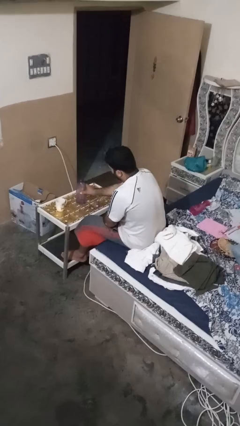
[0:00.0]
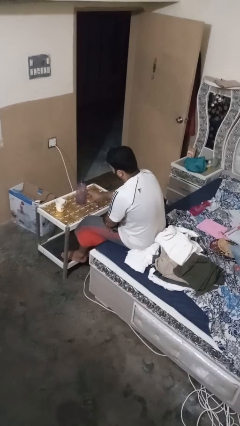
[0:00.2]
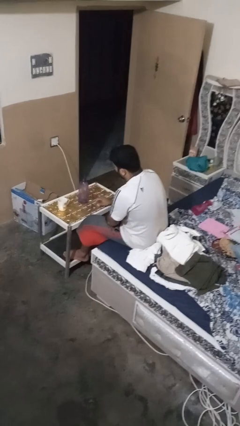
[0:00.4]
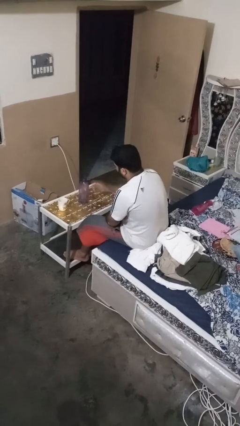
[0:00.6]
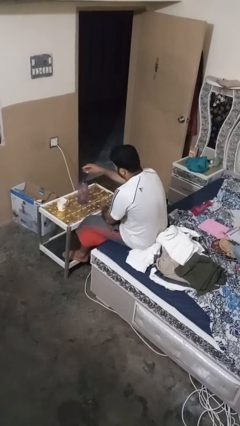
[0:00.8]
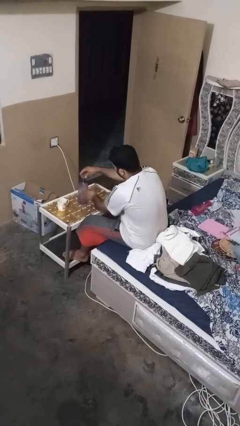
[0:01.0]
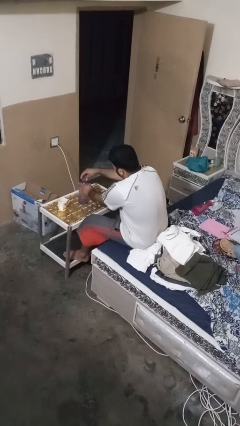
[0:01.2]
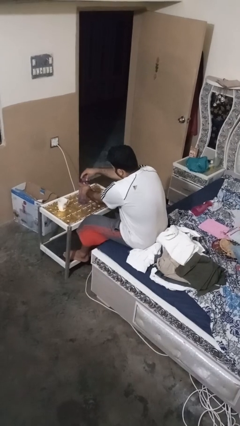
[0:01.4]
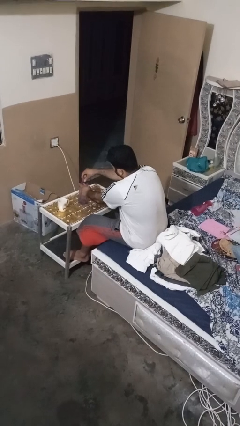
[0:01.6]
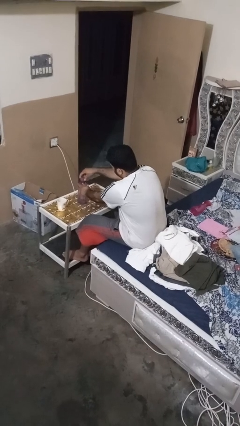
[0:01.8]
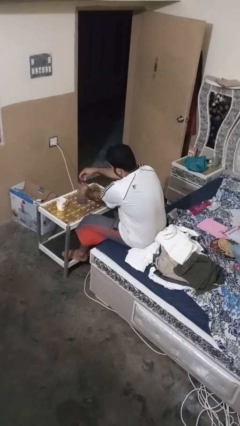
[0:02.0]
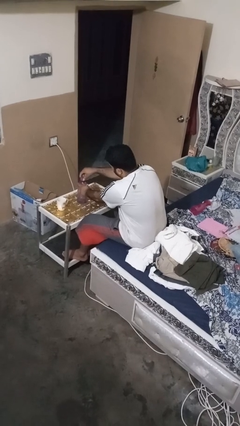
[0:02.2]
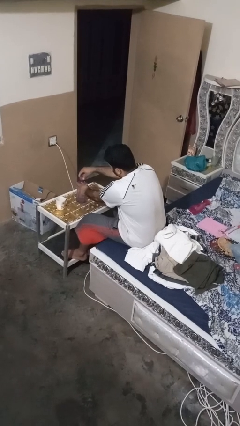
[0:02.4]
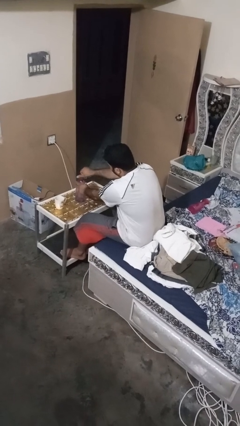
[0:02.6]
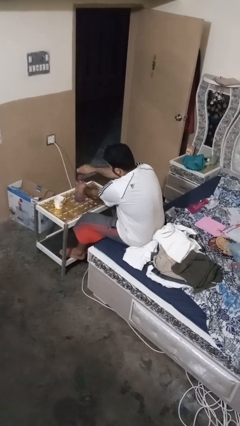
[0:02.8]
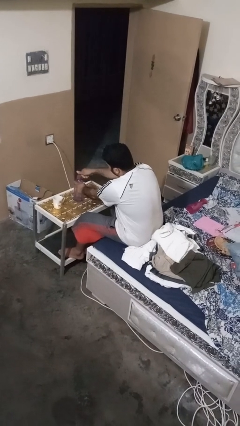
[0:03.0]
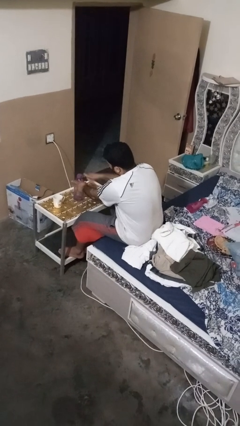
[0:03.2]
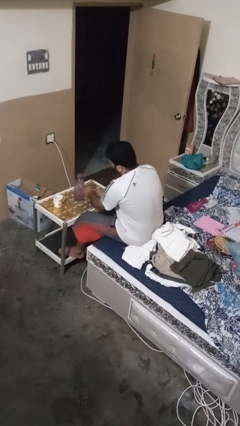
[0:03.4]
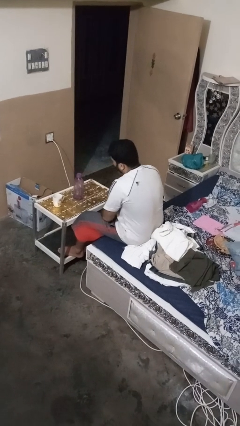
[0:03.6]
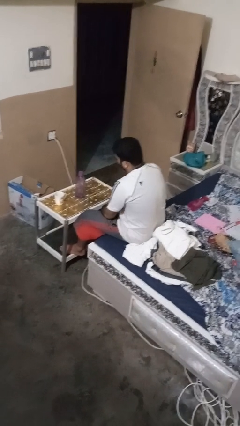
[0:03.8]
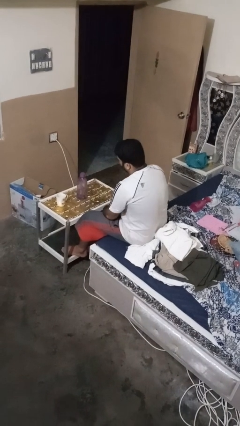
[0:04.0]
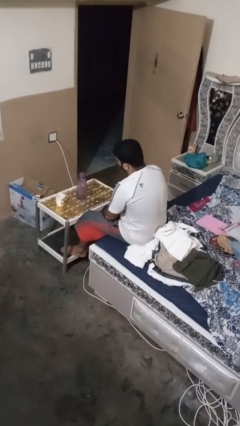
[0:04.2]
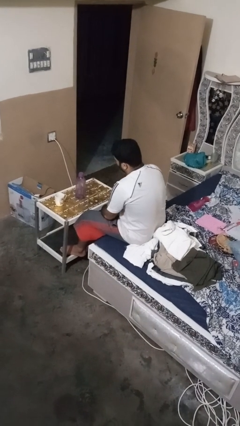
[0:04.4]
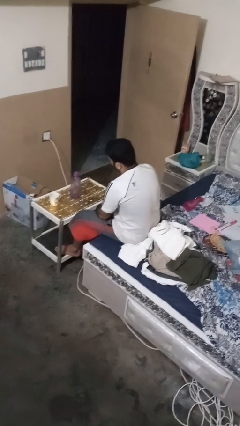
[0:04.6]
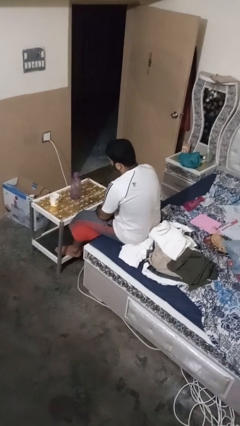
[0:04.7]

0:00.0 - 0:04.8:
person screws lid to bottle

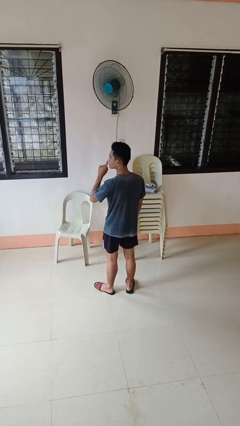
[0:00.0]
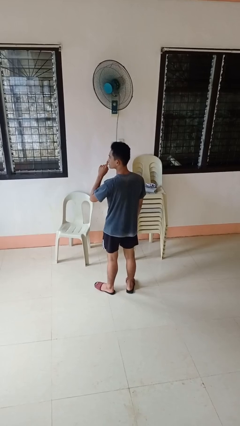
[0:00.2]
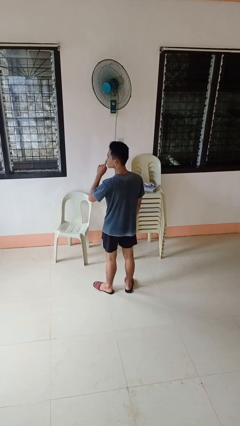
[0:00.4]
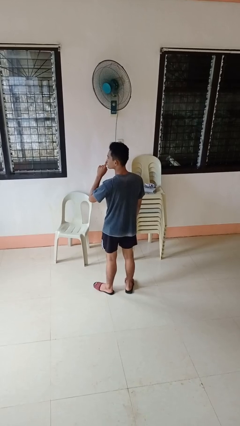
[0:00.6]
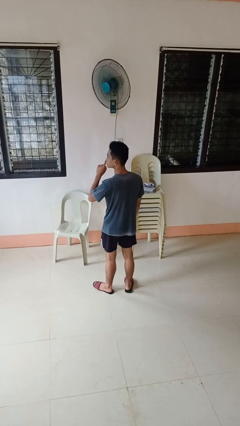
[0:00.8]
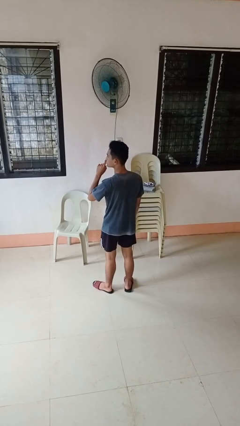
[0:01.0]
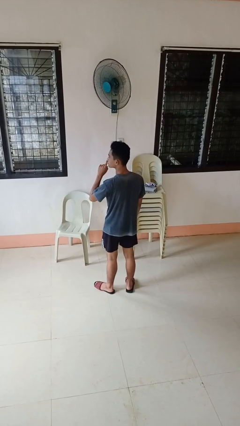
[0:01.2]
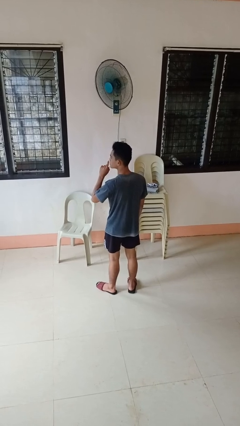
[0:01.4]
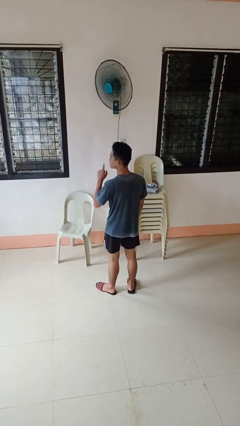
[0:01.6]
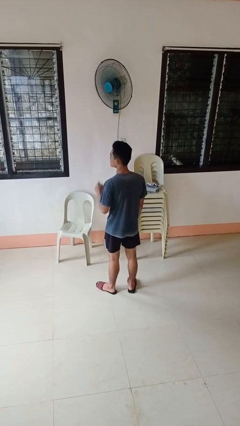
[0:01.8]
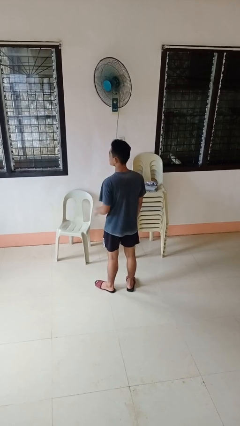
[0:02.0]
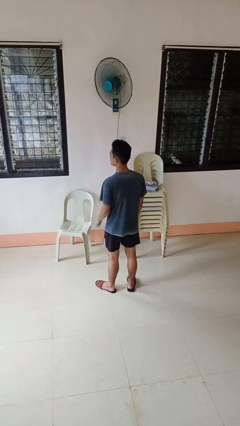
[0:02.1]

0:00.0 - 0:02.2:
person gestures be quiet

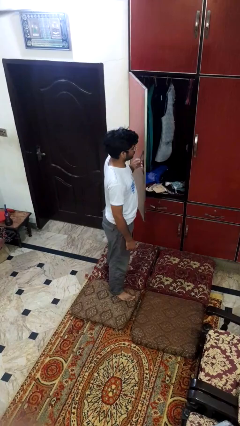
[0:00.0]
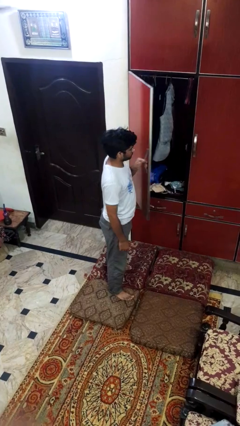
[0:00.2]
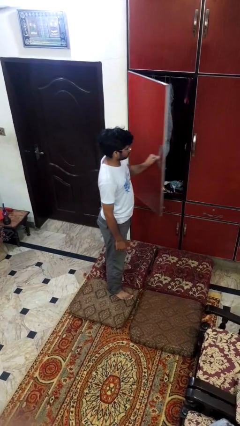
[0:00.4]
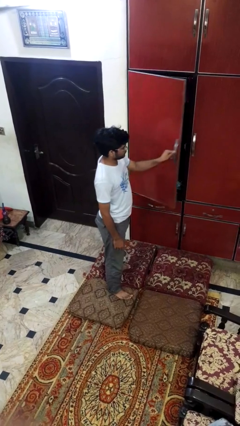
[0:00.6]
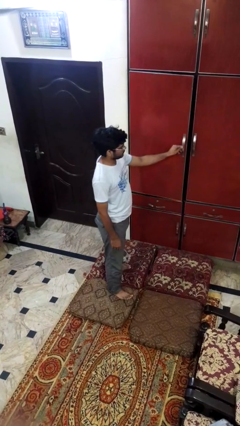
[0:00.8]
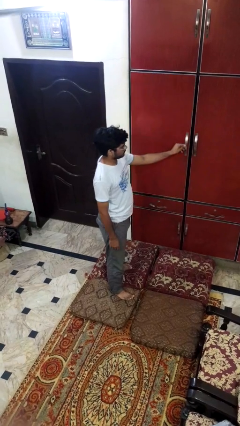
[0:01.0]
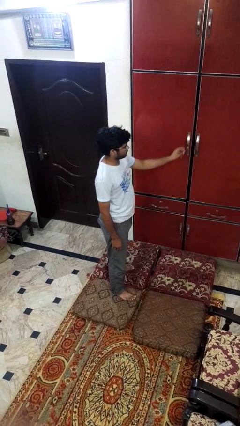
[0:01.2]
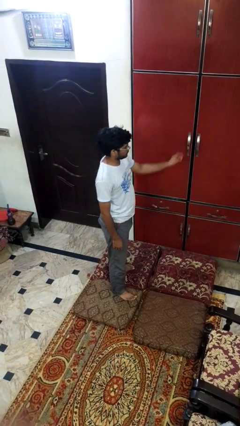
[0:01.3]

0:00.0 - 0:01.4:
person closes closet door

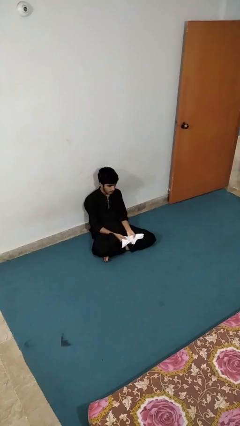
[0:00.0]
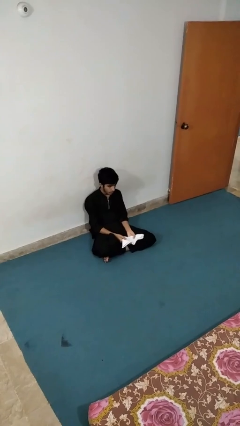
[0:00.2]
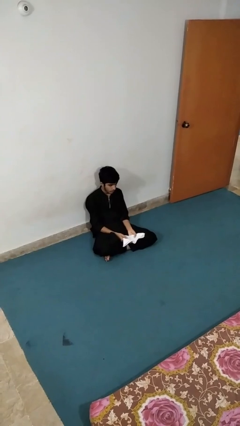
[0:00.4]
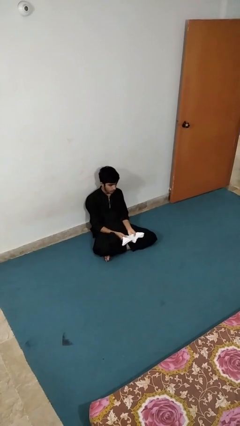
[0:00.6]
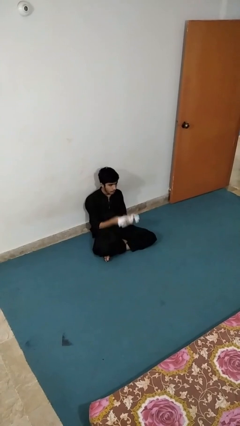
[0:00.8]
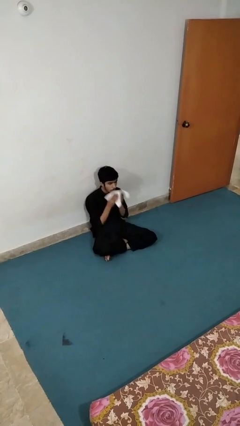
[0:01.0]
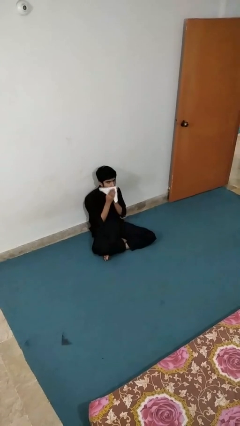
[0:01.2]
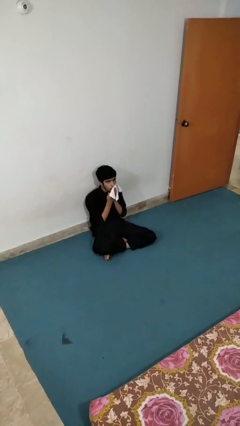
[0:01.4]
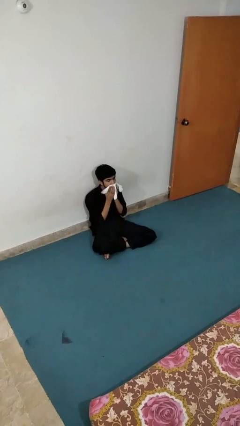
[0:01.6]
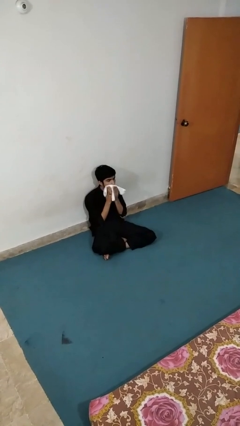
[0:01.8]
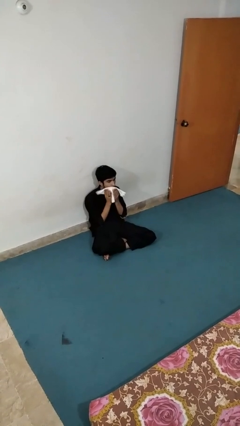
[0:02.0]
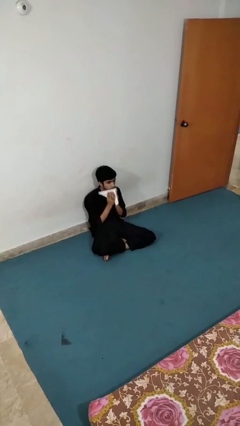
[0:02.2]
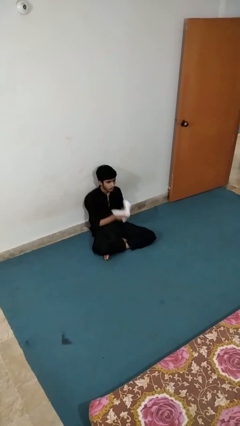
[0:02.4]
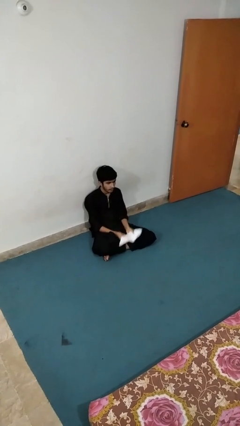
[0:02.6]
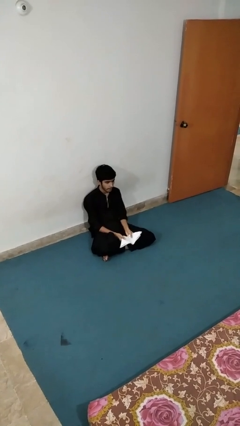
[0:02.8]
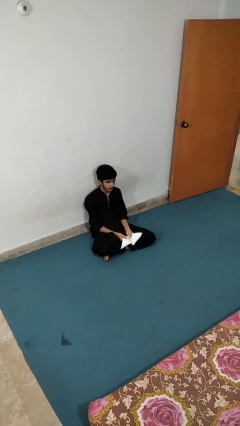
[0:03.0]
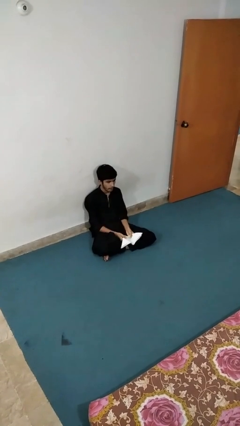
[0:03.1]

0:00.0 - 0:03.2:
person wipes mouth with napkin

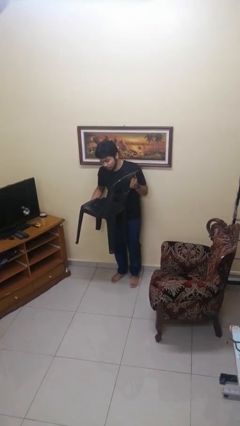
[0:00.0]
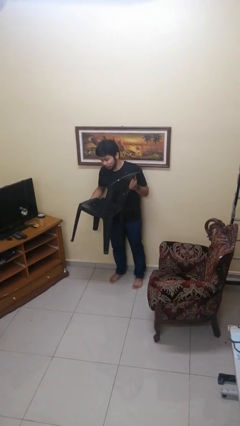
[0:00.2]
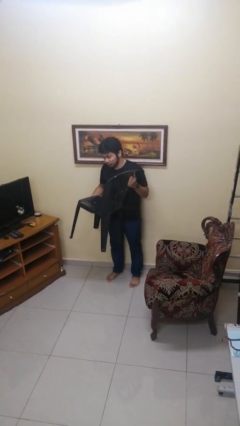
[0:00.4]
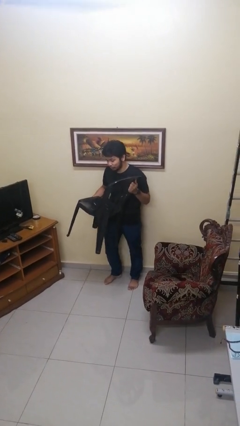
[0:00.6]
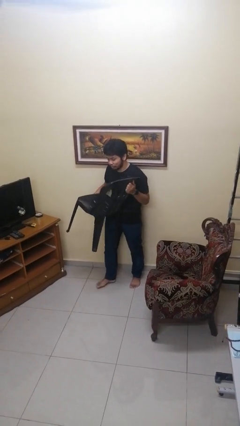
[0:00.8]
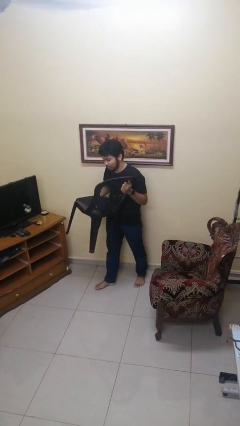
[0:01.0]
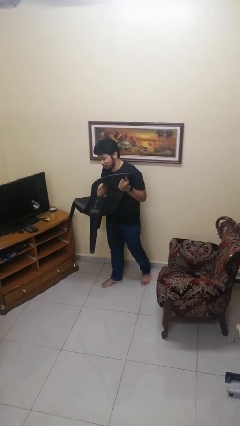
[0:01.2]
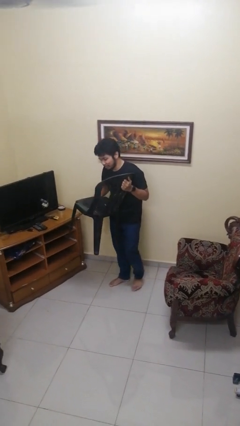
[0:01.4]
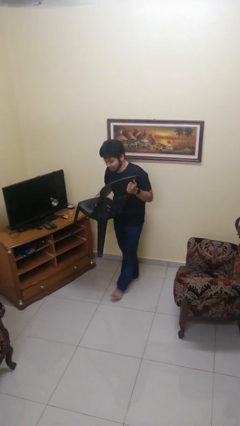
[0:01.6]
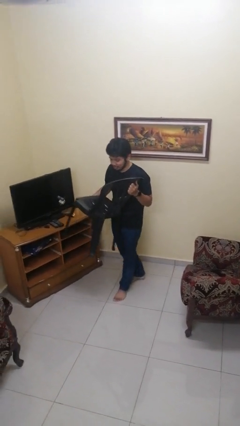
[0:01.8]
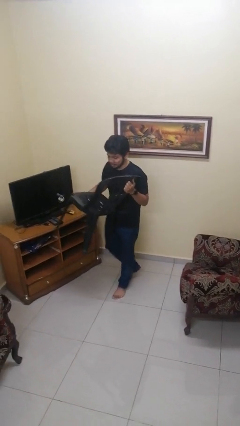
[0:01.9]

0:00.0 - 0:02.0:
person carries furniture

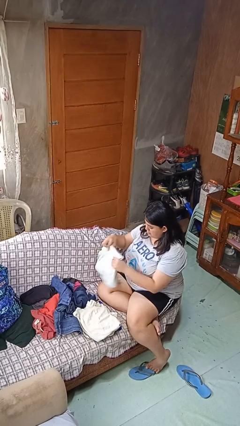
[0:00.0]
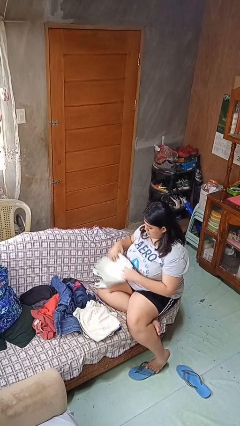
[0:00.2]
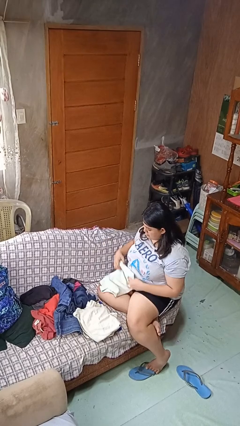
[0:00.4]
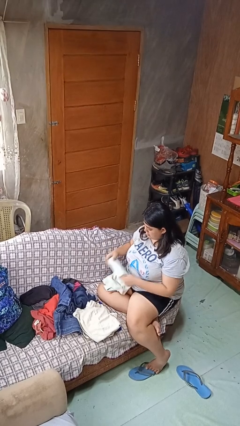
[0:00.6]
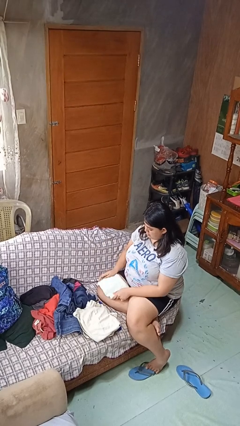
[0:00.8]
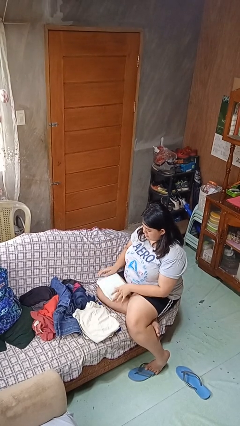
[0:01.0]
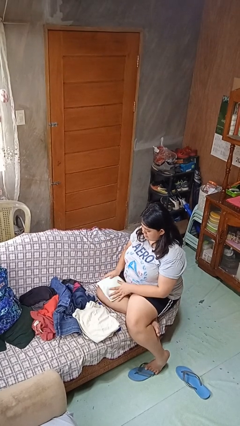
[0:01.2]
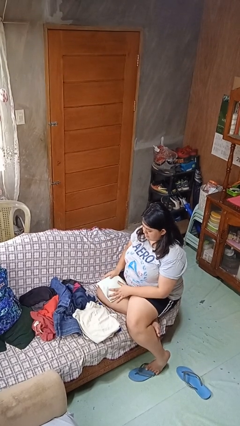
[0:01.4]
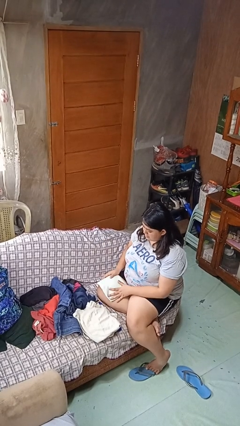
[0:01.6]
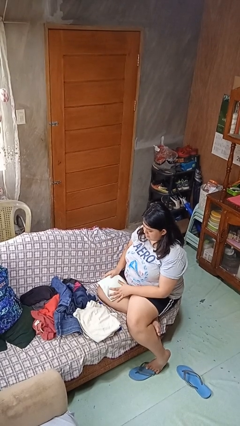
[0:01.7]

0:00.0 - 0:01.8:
person folds shirt

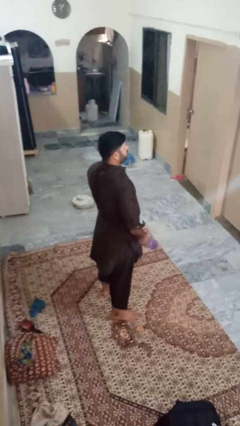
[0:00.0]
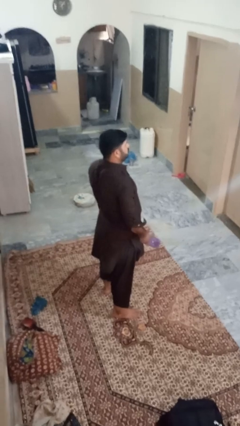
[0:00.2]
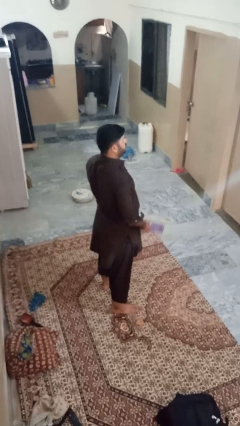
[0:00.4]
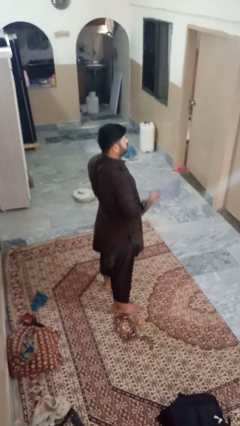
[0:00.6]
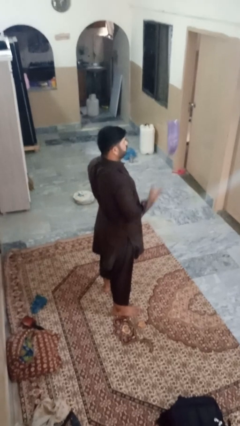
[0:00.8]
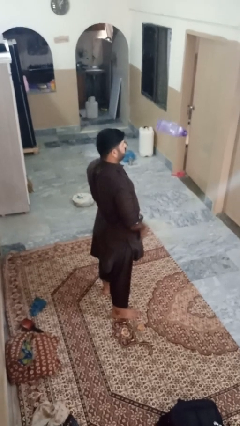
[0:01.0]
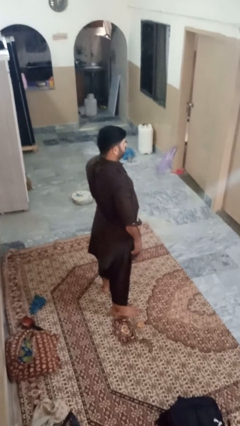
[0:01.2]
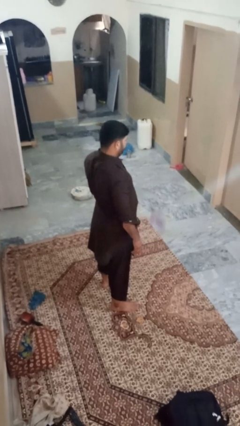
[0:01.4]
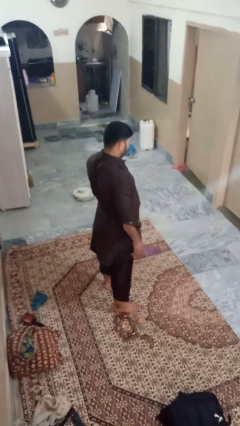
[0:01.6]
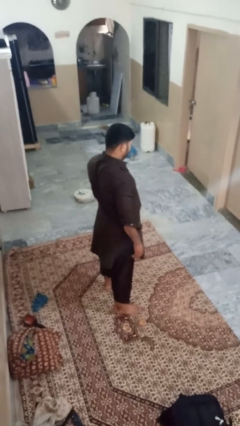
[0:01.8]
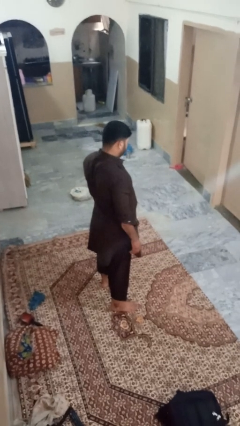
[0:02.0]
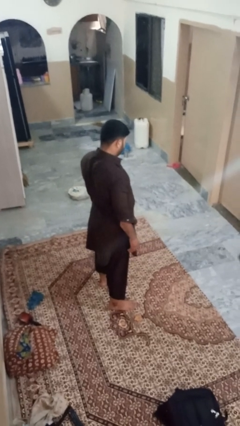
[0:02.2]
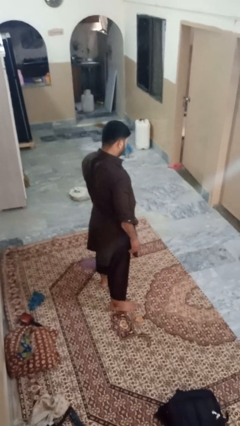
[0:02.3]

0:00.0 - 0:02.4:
person throws object into air
